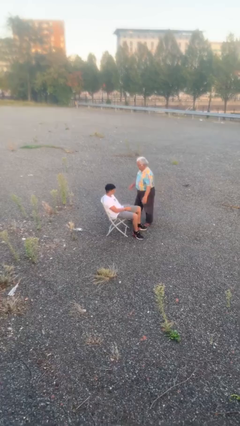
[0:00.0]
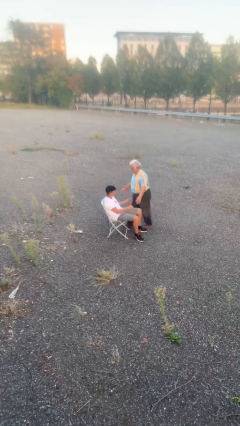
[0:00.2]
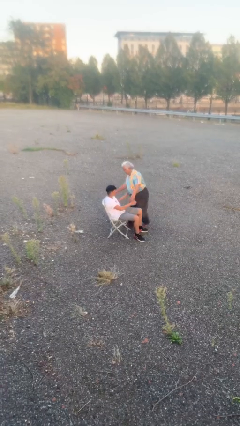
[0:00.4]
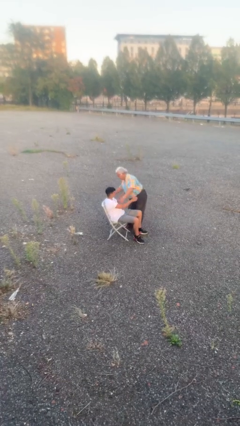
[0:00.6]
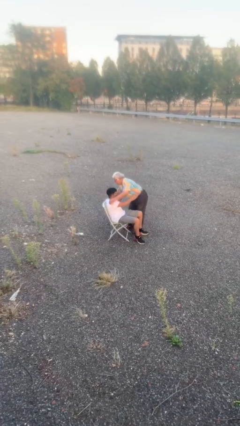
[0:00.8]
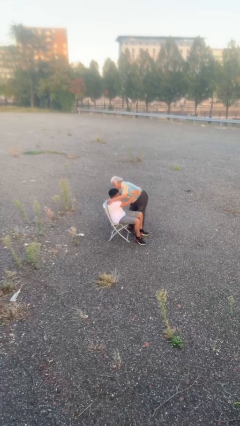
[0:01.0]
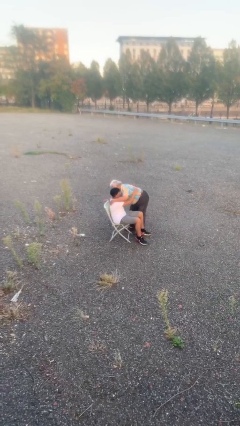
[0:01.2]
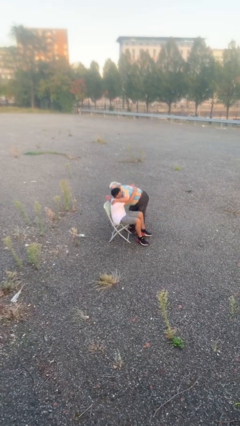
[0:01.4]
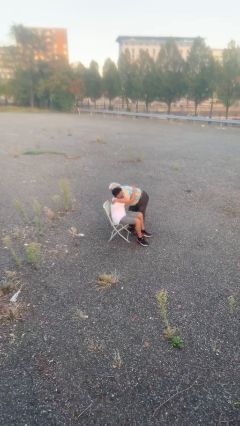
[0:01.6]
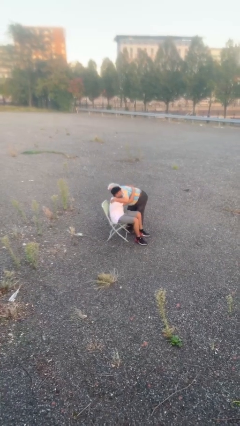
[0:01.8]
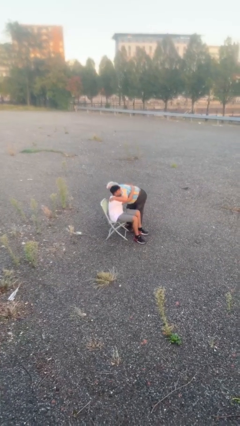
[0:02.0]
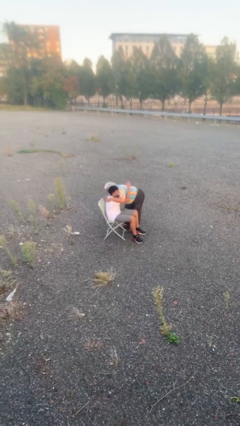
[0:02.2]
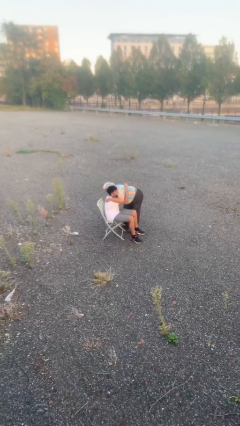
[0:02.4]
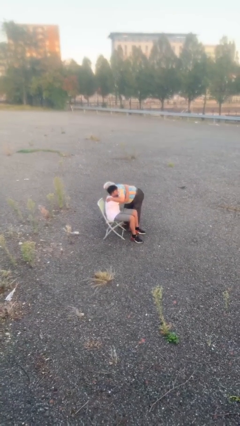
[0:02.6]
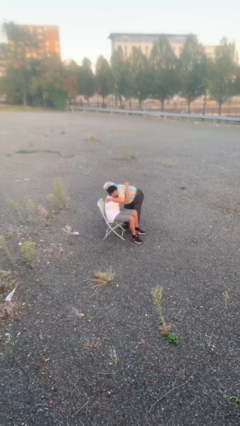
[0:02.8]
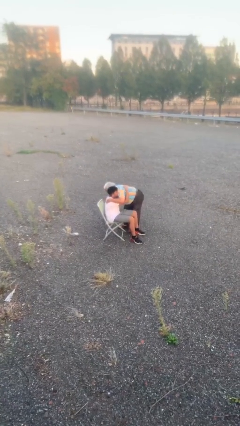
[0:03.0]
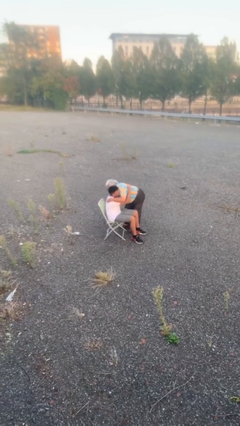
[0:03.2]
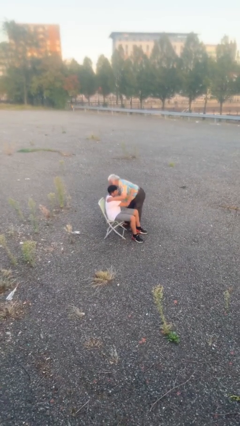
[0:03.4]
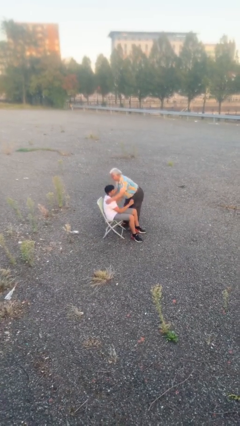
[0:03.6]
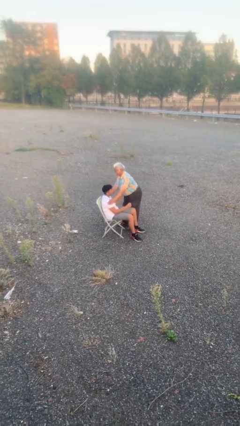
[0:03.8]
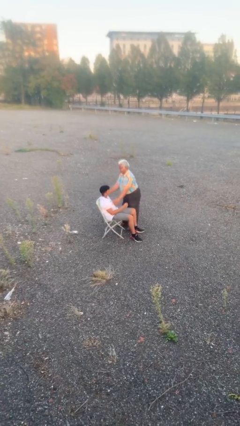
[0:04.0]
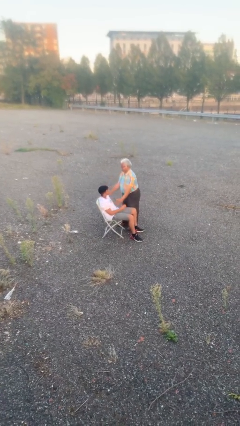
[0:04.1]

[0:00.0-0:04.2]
person embraces person

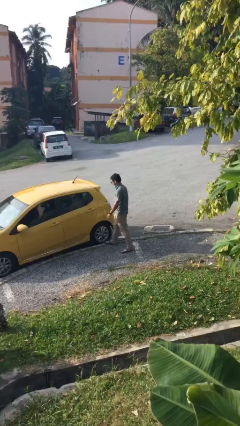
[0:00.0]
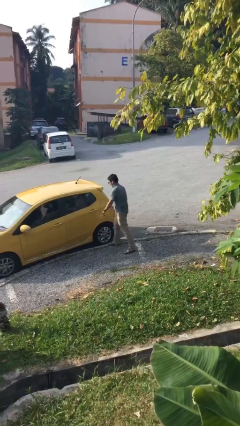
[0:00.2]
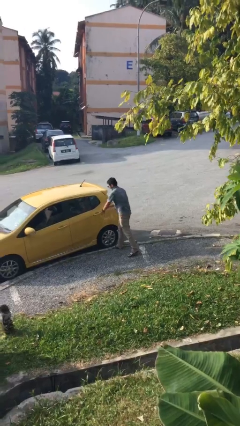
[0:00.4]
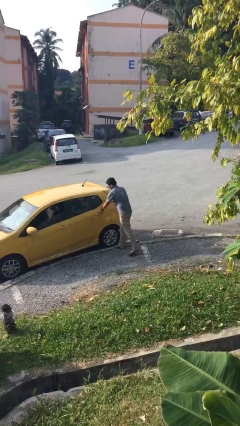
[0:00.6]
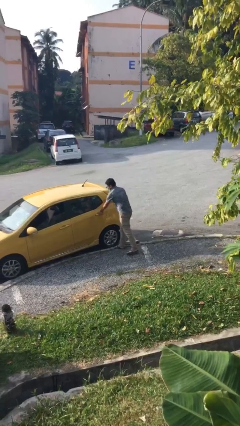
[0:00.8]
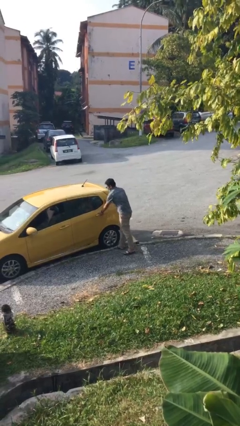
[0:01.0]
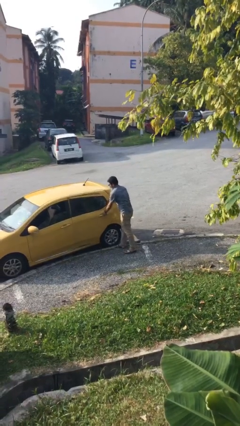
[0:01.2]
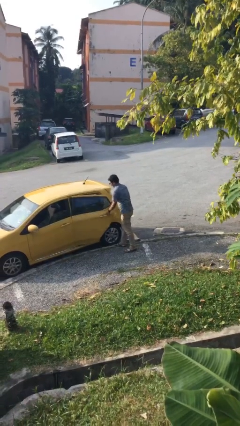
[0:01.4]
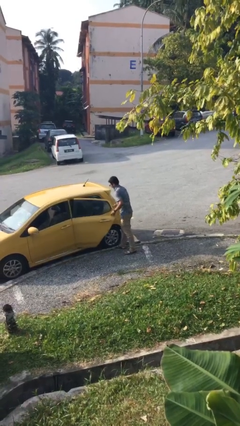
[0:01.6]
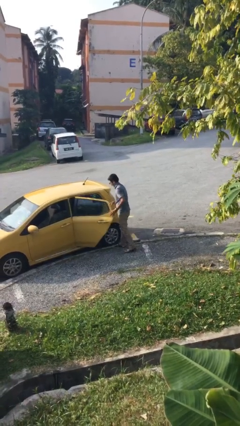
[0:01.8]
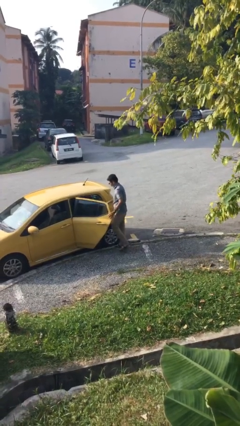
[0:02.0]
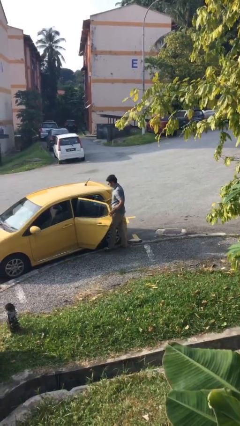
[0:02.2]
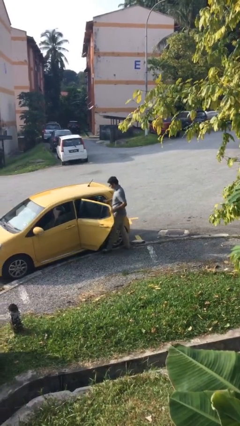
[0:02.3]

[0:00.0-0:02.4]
person opens car door

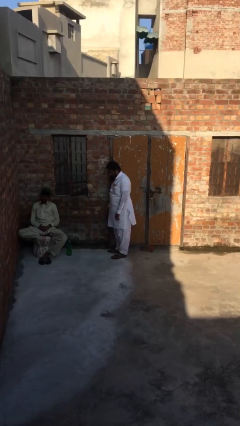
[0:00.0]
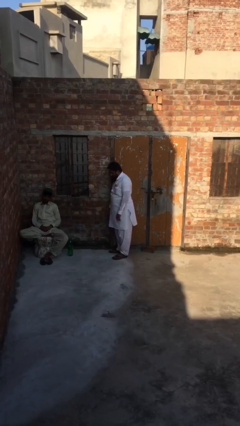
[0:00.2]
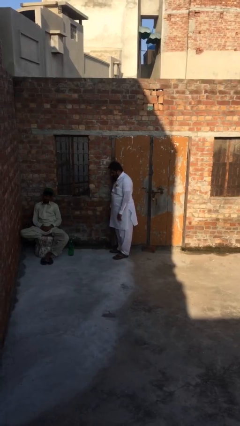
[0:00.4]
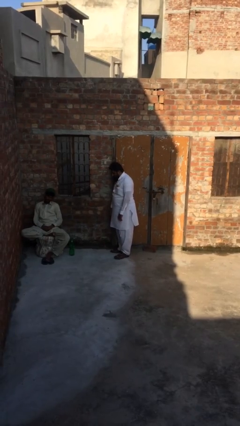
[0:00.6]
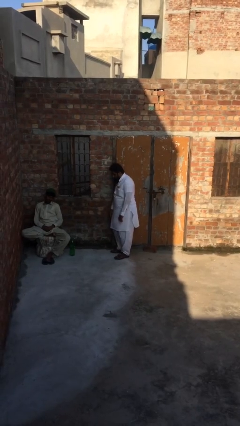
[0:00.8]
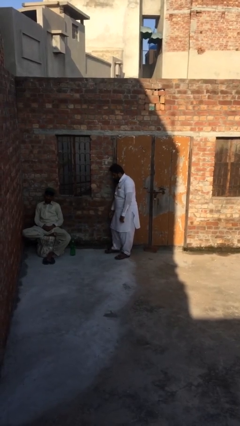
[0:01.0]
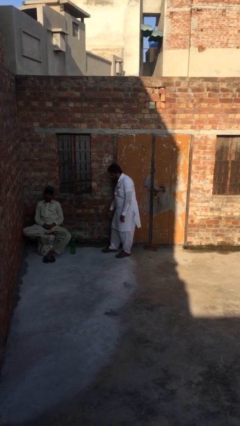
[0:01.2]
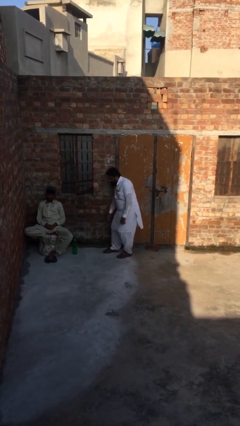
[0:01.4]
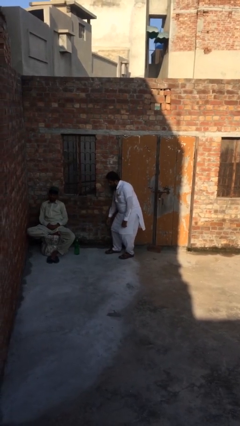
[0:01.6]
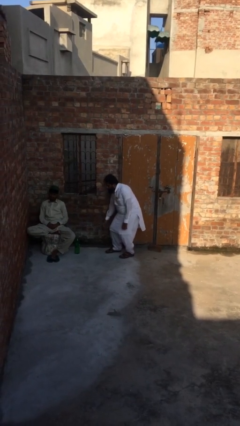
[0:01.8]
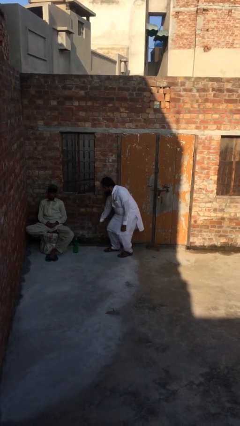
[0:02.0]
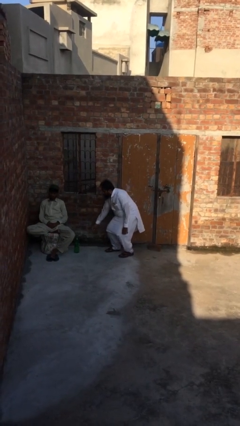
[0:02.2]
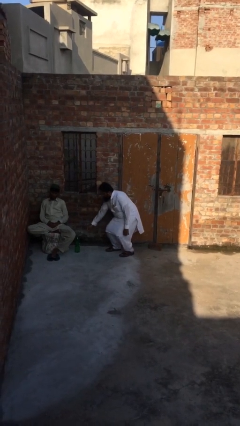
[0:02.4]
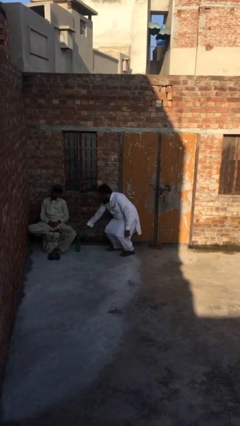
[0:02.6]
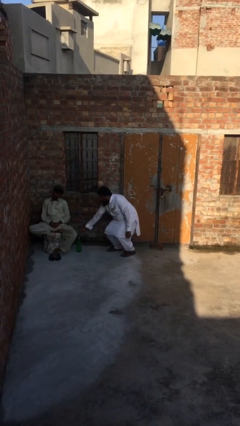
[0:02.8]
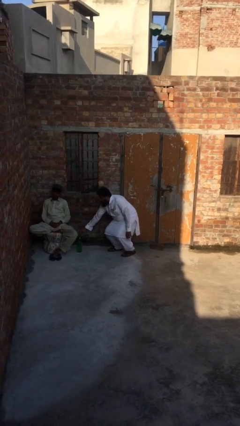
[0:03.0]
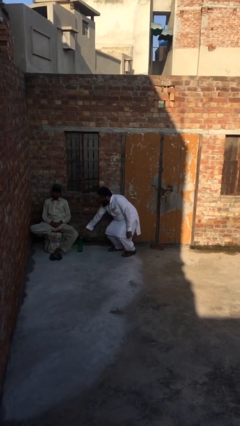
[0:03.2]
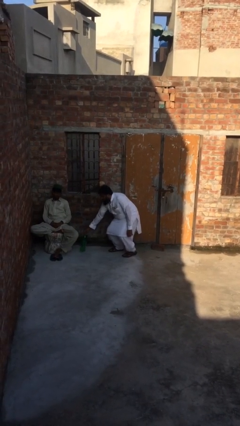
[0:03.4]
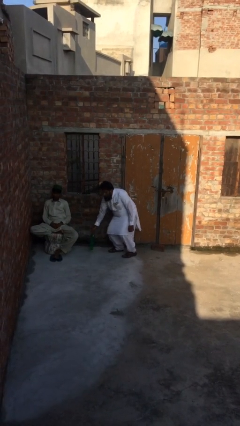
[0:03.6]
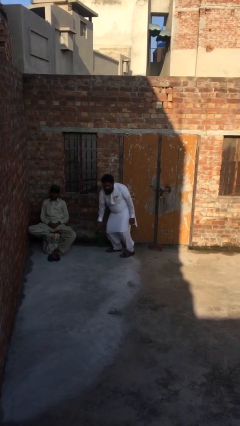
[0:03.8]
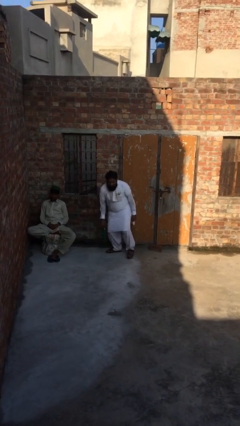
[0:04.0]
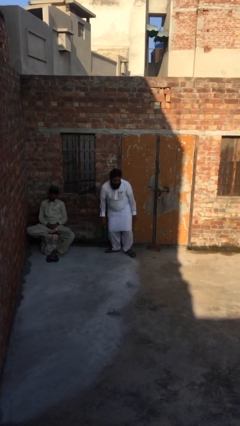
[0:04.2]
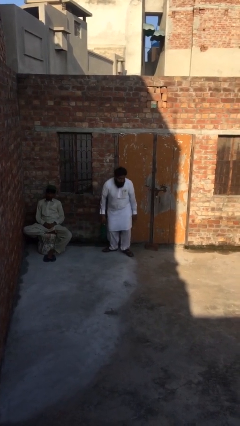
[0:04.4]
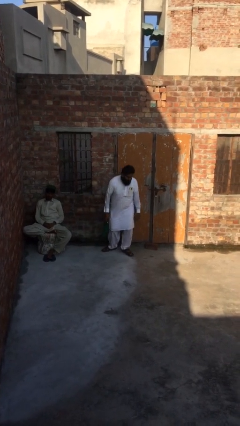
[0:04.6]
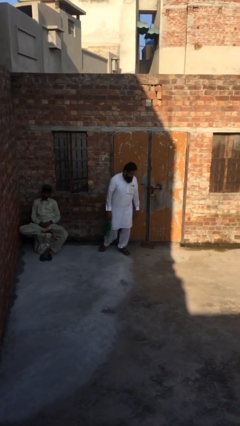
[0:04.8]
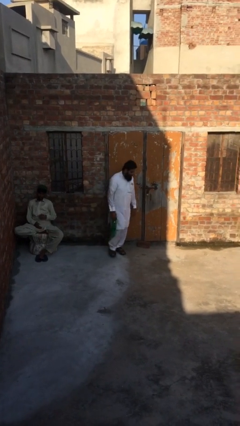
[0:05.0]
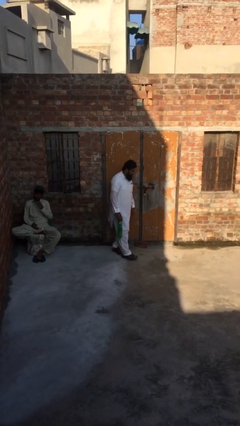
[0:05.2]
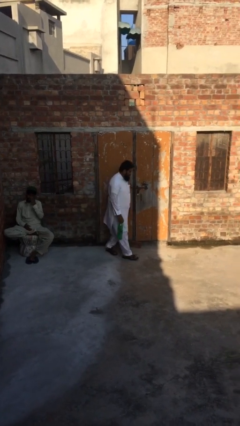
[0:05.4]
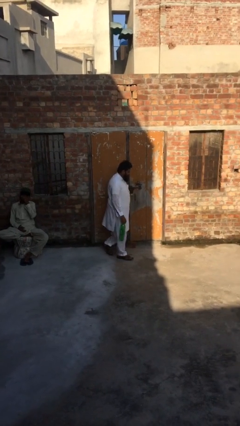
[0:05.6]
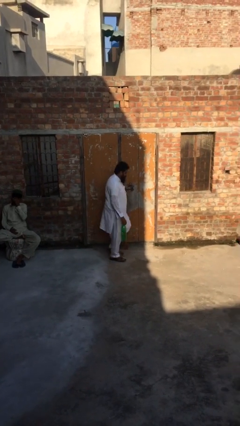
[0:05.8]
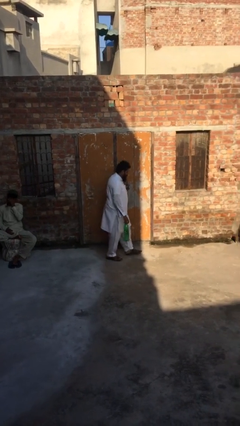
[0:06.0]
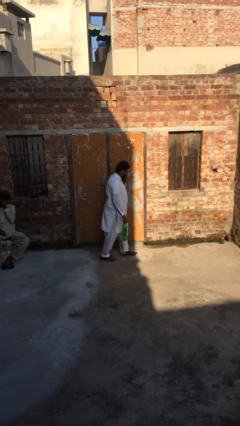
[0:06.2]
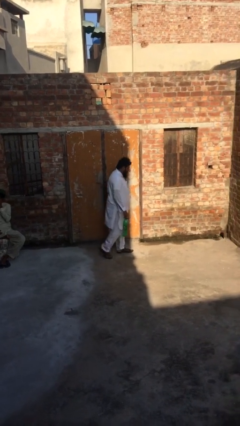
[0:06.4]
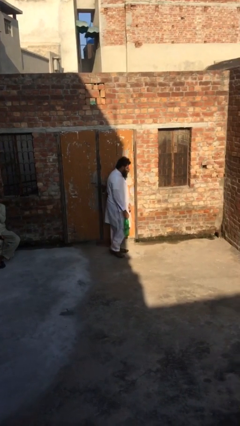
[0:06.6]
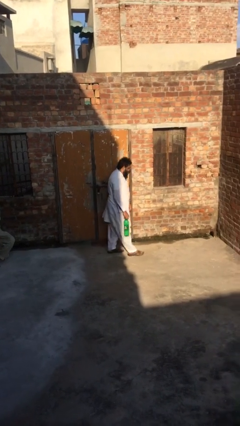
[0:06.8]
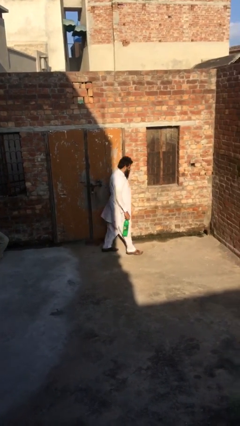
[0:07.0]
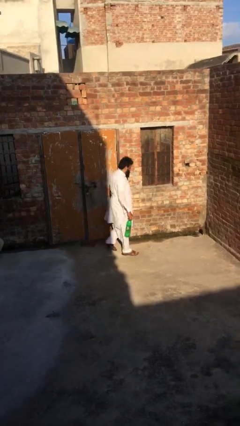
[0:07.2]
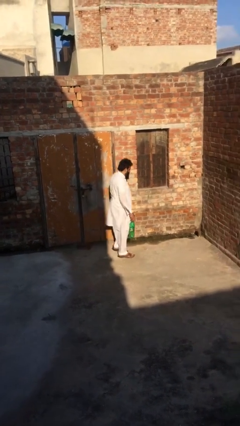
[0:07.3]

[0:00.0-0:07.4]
person steals object from person

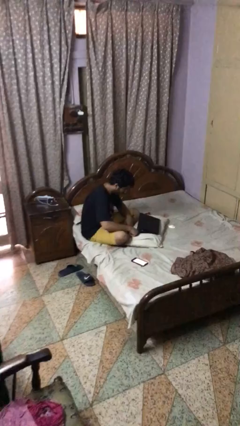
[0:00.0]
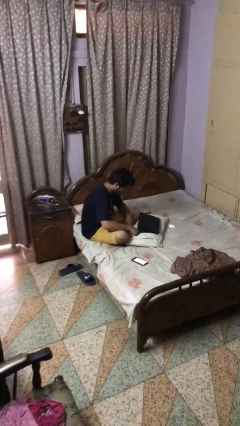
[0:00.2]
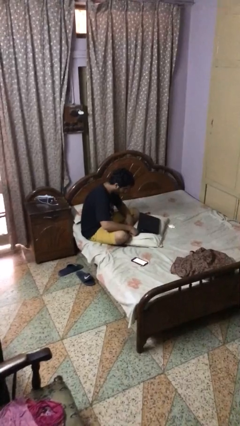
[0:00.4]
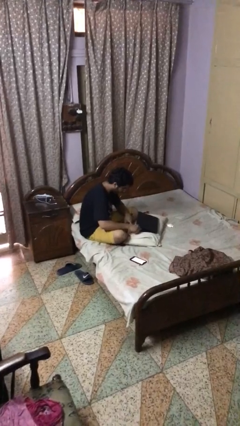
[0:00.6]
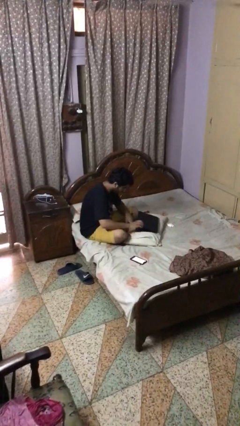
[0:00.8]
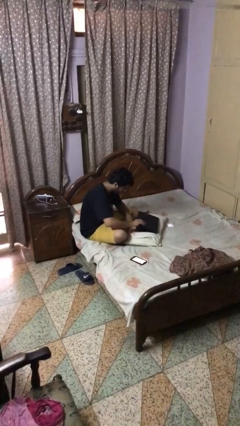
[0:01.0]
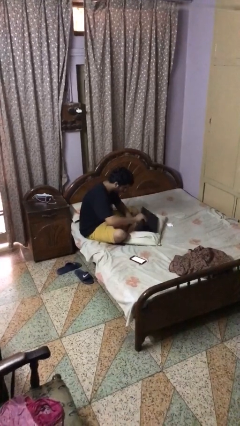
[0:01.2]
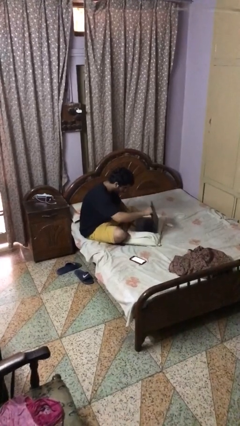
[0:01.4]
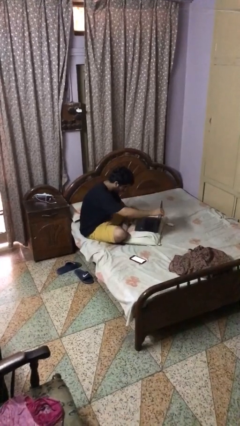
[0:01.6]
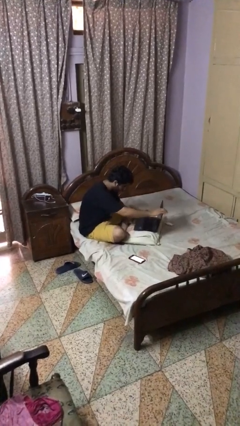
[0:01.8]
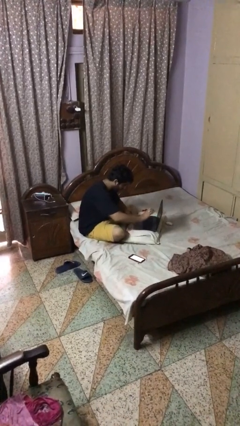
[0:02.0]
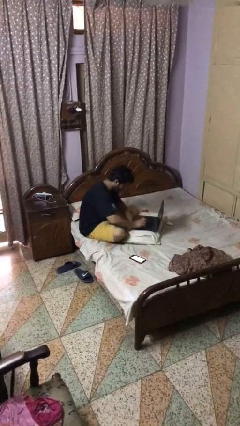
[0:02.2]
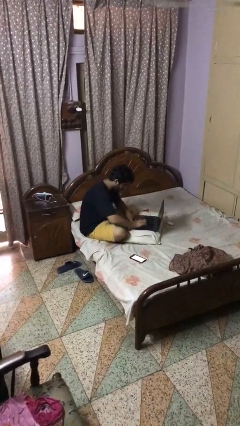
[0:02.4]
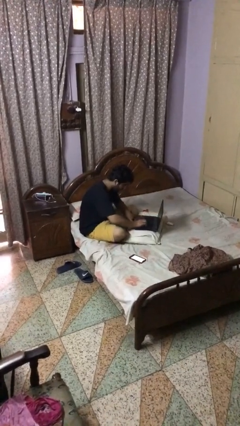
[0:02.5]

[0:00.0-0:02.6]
person opens laptop

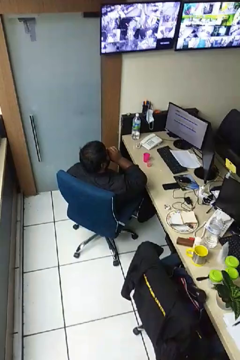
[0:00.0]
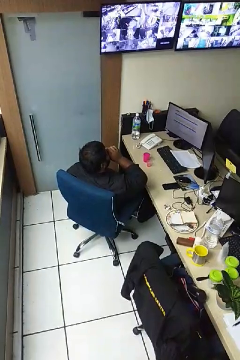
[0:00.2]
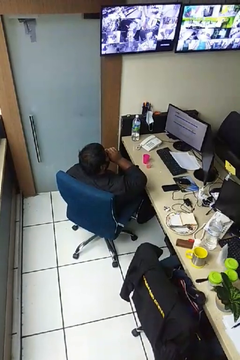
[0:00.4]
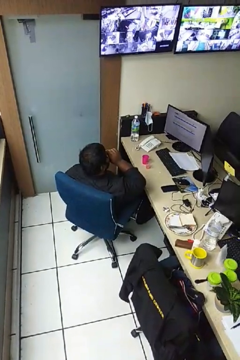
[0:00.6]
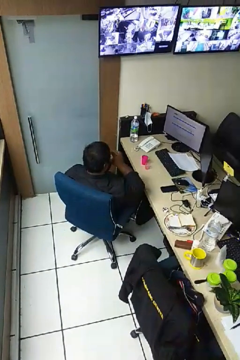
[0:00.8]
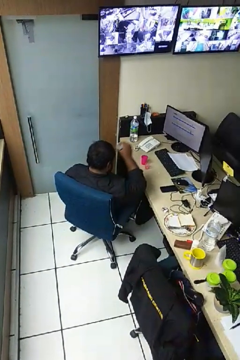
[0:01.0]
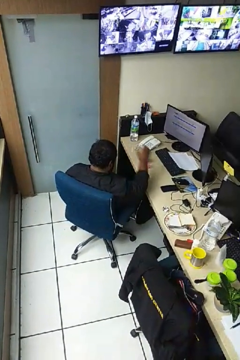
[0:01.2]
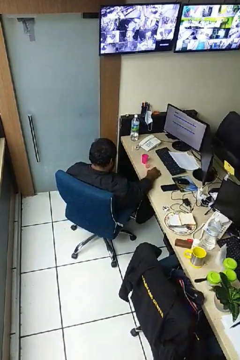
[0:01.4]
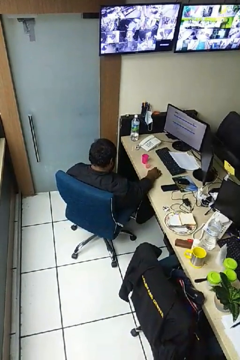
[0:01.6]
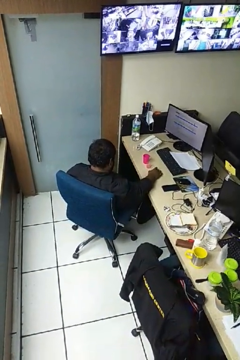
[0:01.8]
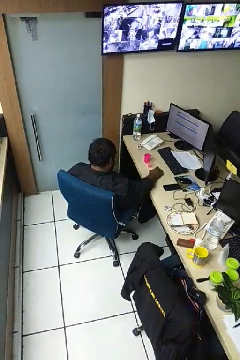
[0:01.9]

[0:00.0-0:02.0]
person puts down object on table
